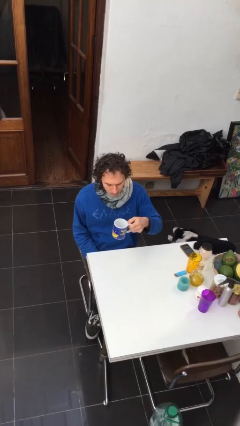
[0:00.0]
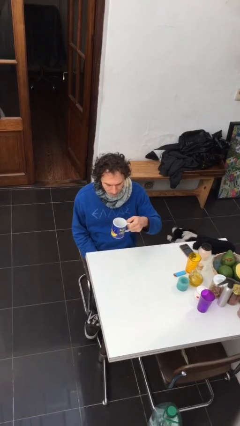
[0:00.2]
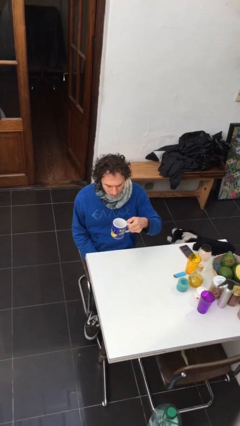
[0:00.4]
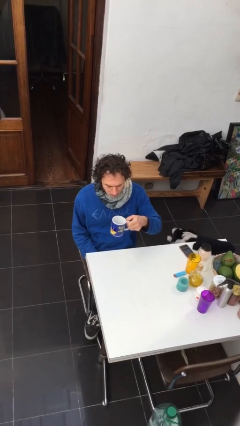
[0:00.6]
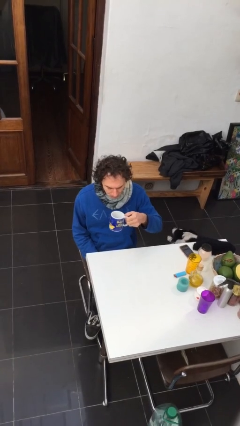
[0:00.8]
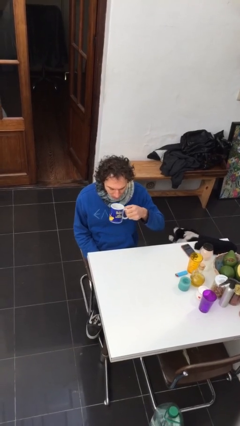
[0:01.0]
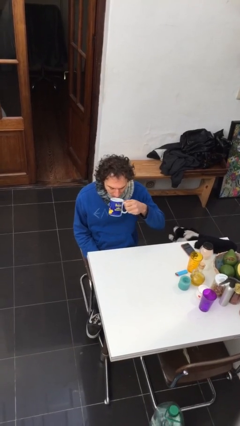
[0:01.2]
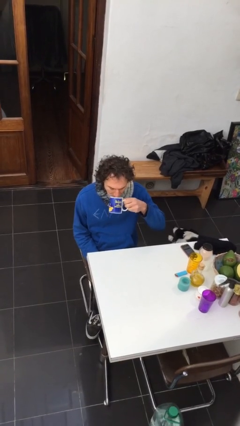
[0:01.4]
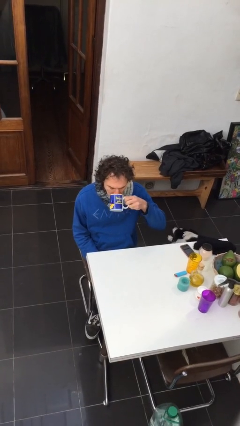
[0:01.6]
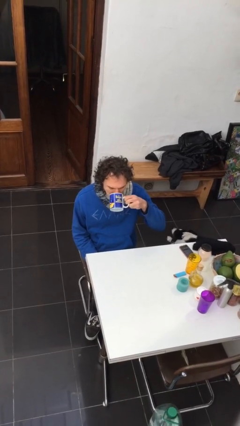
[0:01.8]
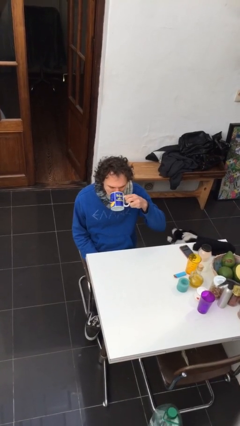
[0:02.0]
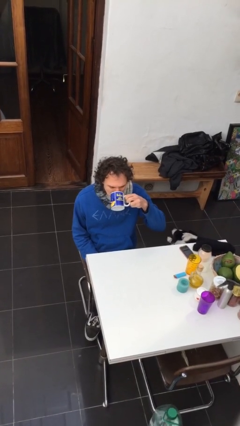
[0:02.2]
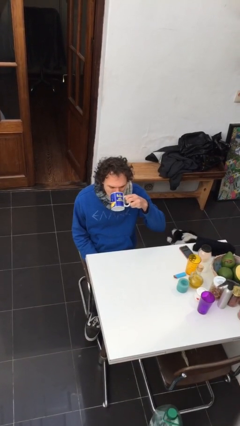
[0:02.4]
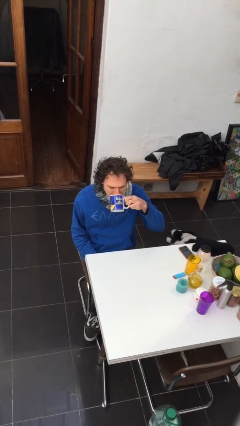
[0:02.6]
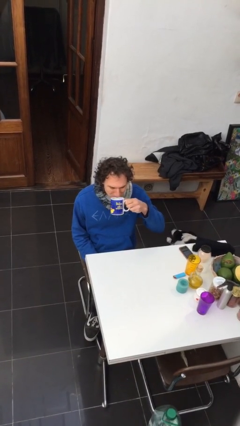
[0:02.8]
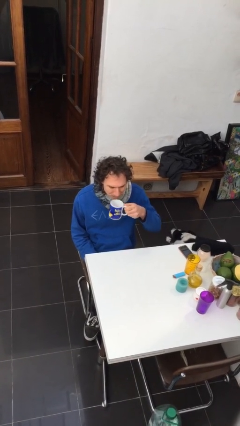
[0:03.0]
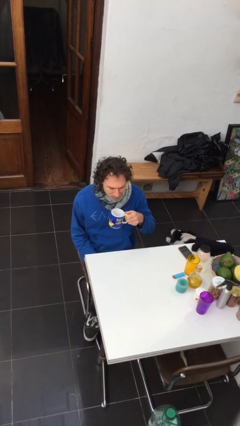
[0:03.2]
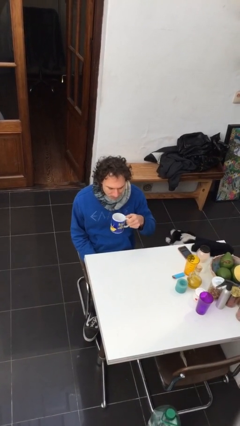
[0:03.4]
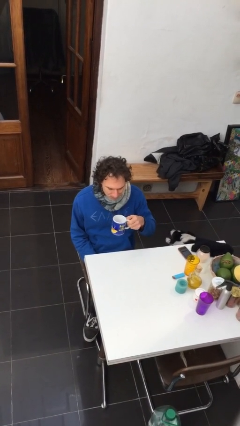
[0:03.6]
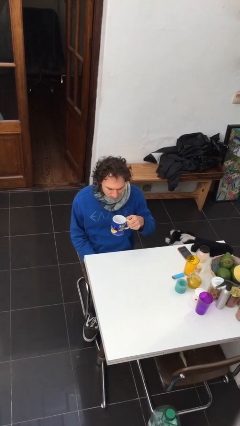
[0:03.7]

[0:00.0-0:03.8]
person drinks from mug

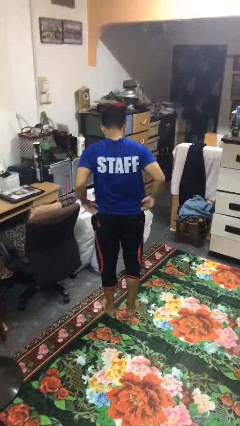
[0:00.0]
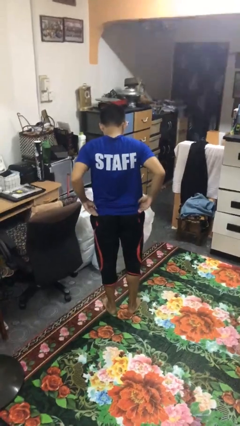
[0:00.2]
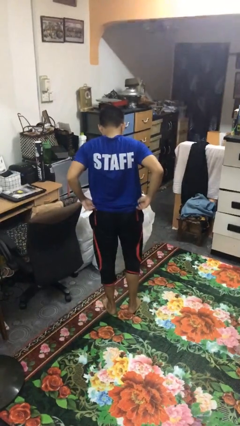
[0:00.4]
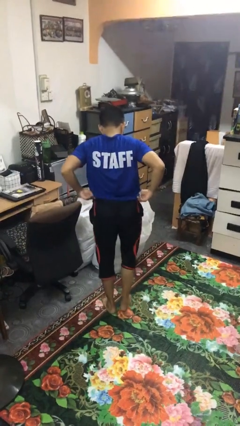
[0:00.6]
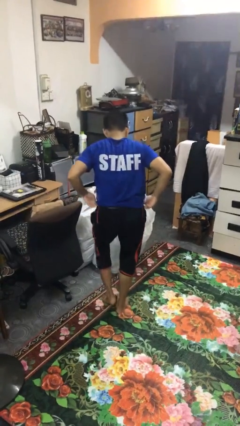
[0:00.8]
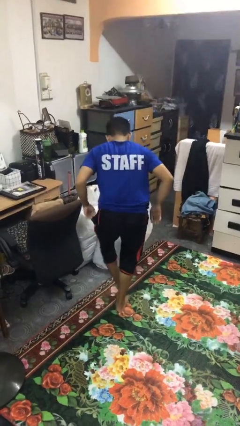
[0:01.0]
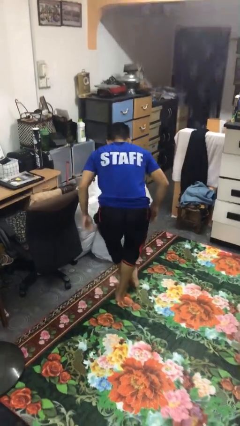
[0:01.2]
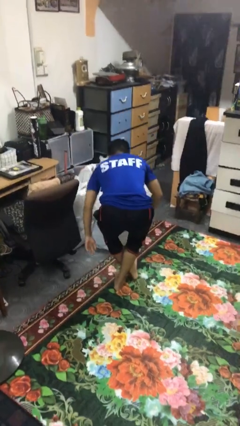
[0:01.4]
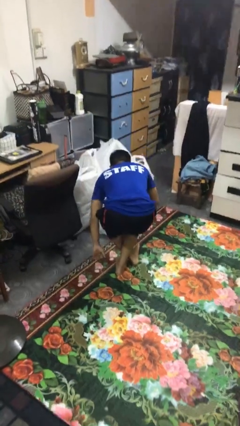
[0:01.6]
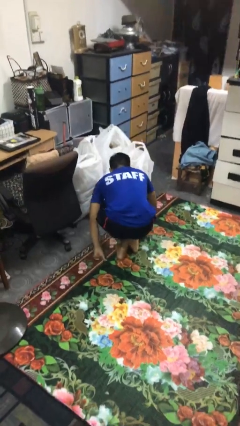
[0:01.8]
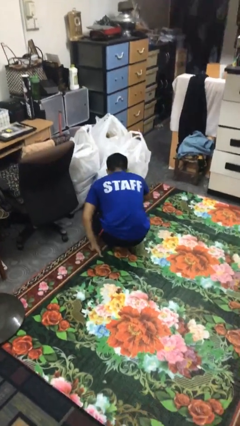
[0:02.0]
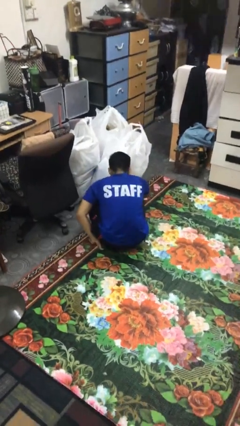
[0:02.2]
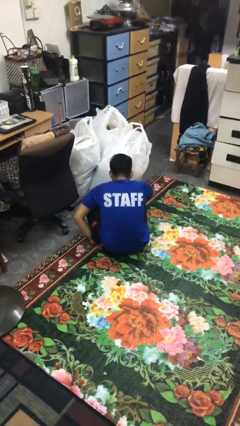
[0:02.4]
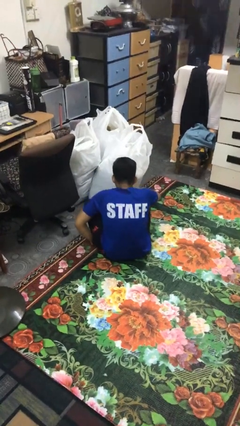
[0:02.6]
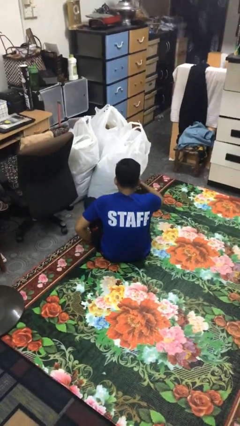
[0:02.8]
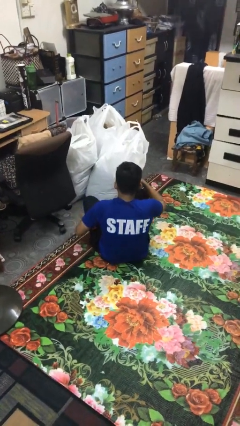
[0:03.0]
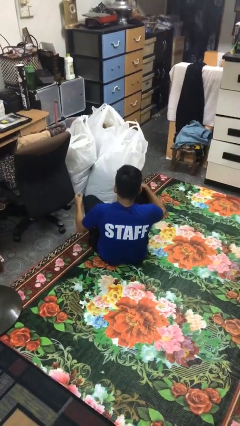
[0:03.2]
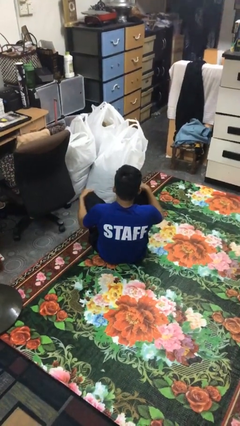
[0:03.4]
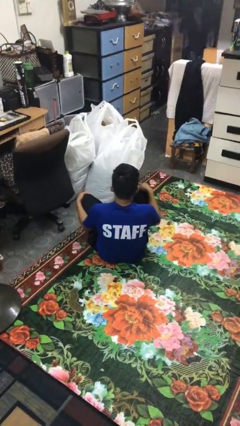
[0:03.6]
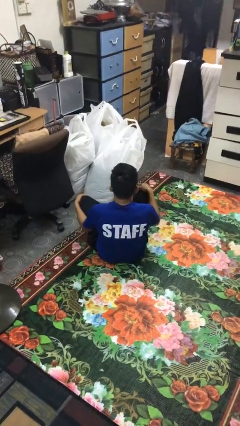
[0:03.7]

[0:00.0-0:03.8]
person sits crisscross

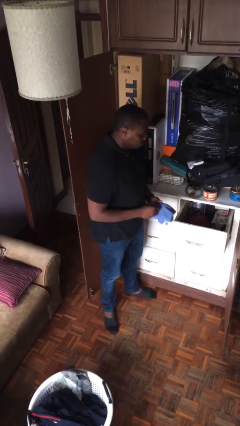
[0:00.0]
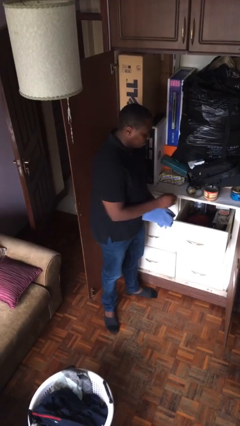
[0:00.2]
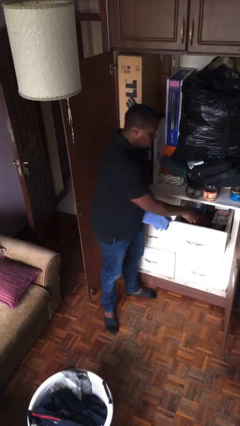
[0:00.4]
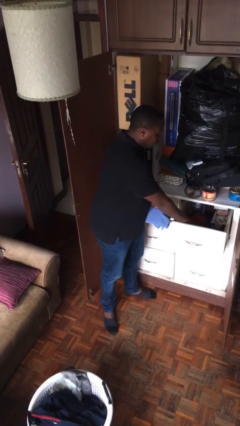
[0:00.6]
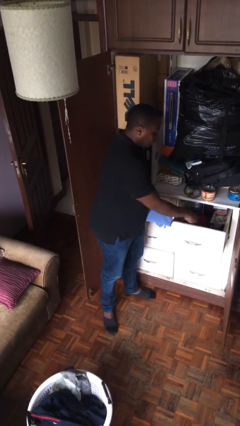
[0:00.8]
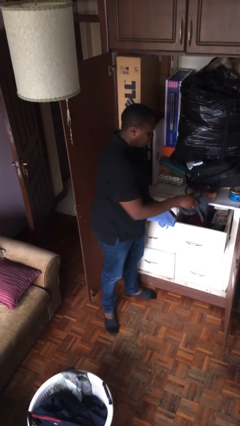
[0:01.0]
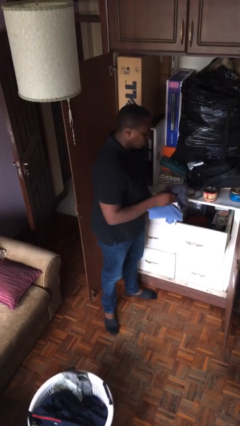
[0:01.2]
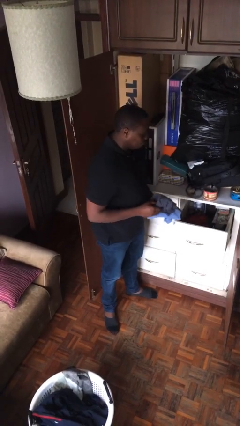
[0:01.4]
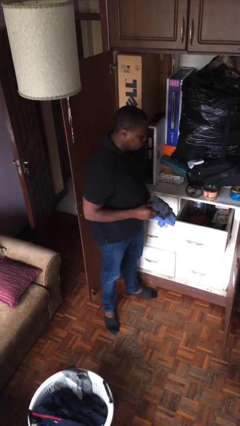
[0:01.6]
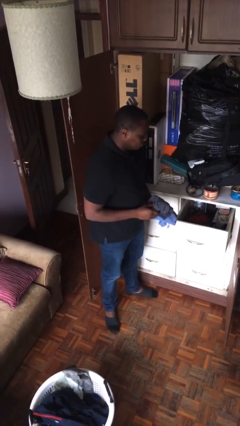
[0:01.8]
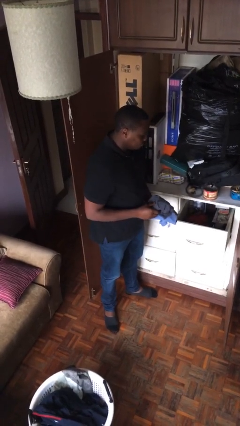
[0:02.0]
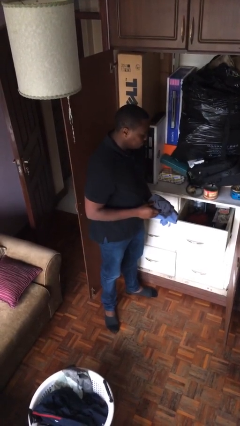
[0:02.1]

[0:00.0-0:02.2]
person takes clothes from dresser

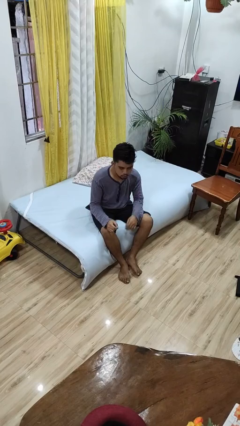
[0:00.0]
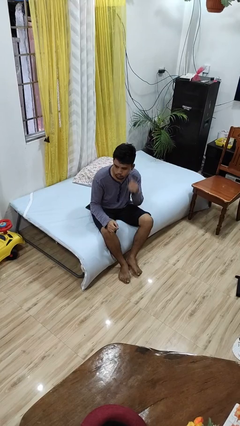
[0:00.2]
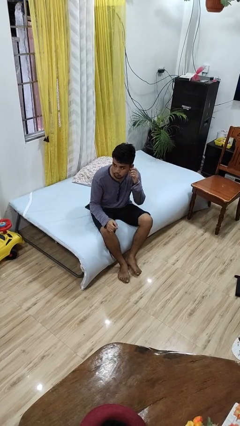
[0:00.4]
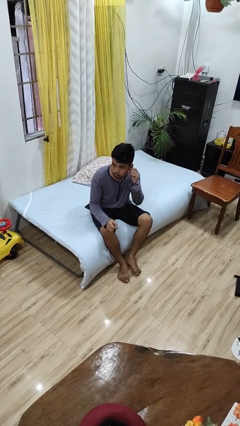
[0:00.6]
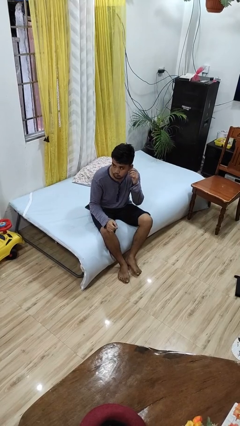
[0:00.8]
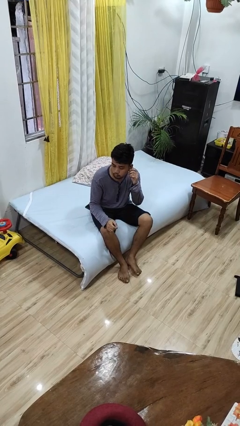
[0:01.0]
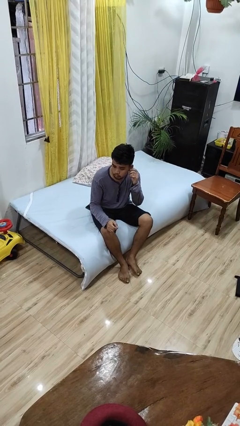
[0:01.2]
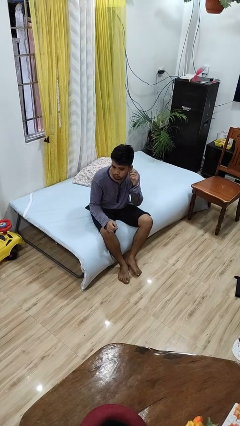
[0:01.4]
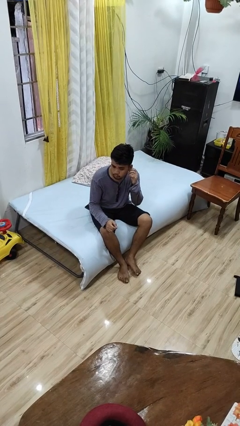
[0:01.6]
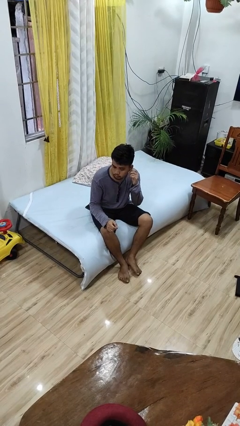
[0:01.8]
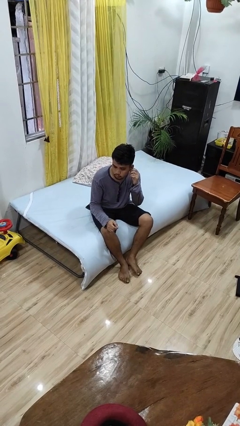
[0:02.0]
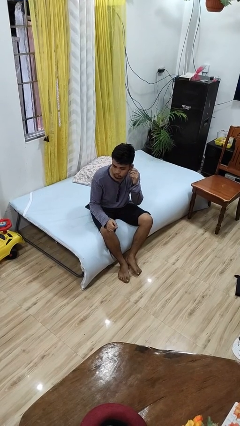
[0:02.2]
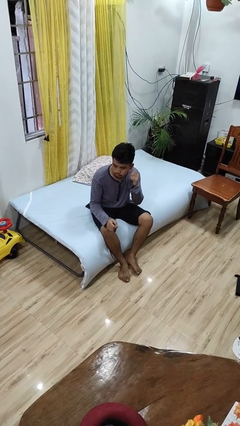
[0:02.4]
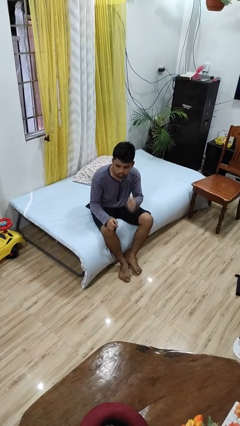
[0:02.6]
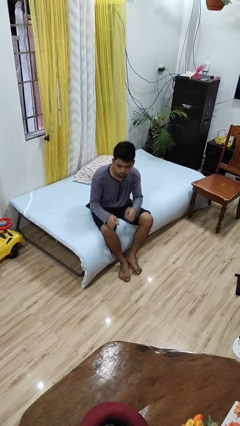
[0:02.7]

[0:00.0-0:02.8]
person touches earlobe

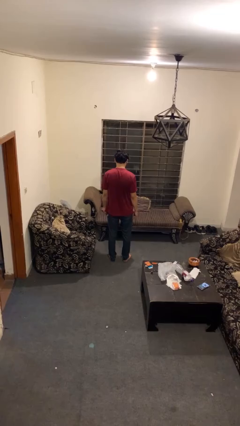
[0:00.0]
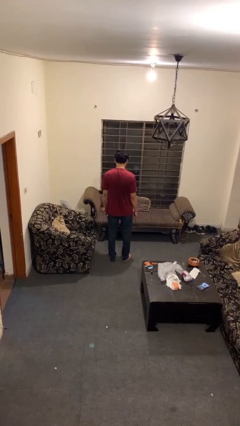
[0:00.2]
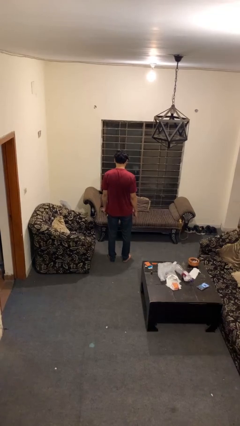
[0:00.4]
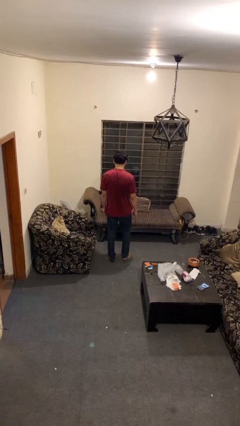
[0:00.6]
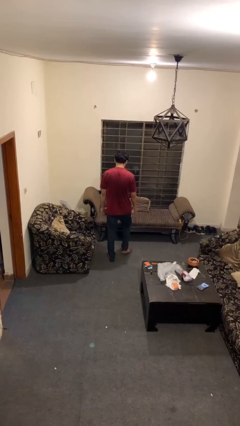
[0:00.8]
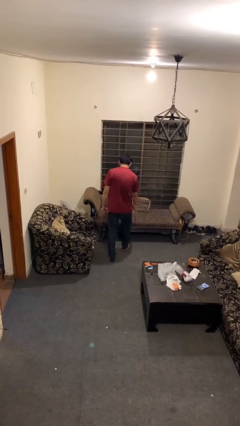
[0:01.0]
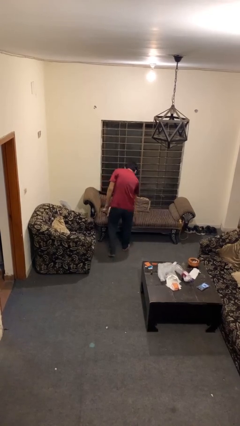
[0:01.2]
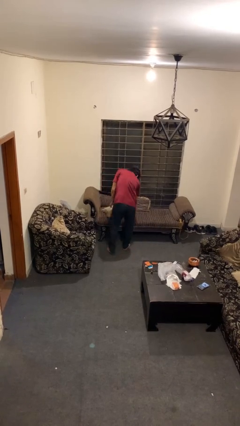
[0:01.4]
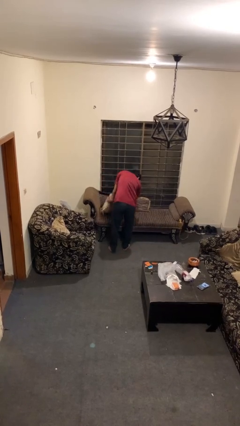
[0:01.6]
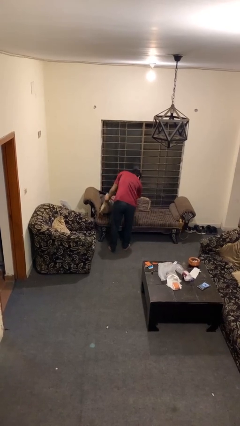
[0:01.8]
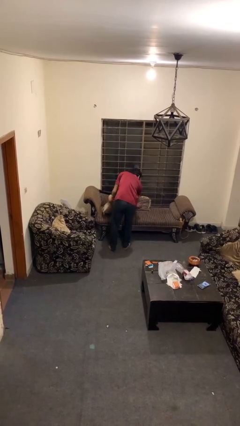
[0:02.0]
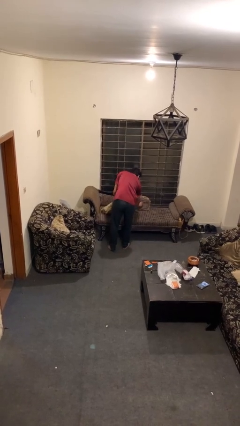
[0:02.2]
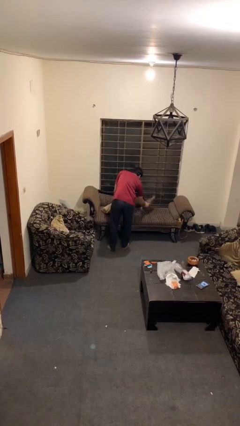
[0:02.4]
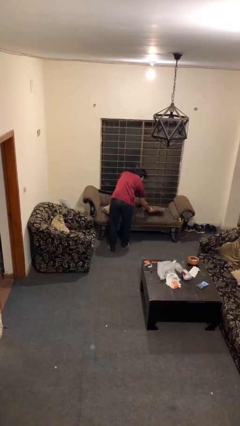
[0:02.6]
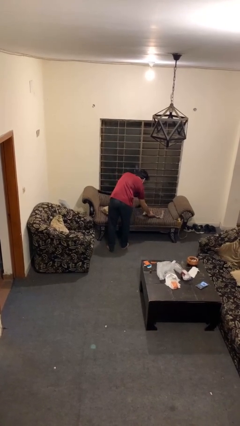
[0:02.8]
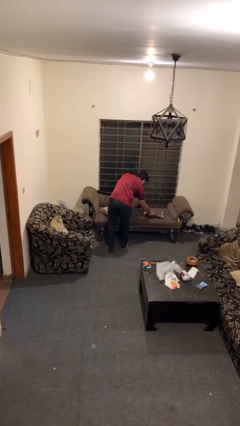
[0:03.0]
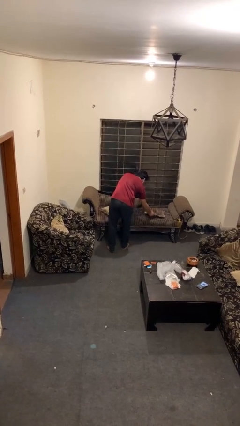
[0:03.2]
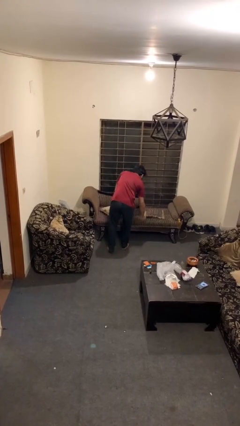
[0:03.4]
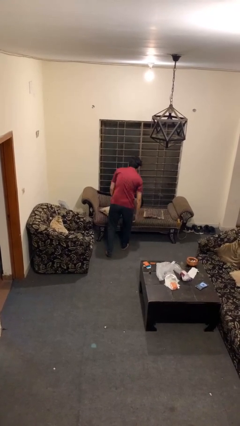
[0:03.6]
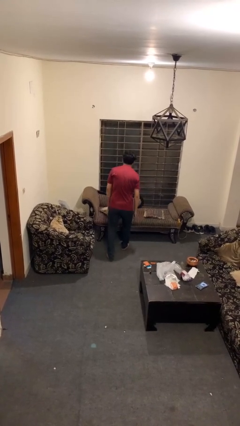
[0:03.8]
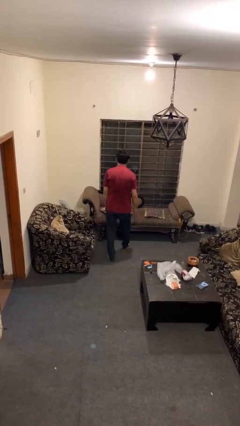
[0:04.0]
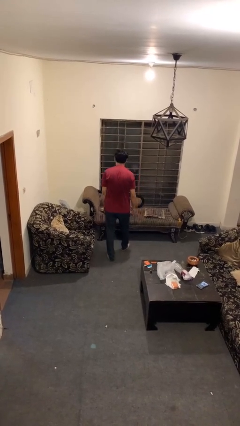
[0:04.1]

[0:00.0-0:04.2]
person searches in couch
